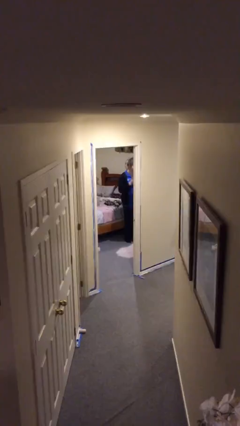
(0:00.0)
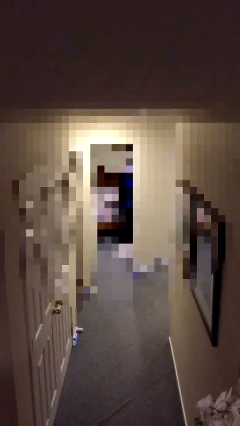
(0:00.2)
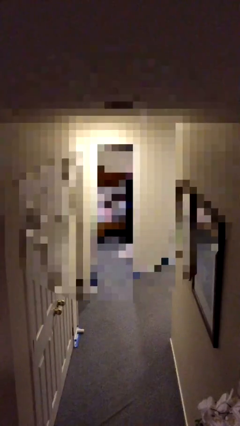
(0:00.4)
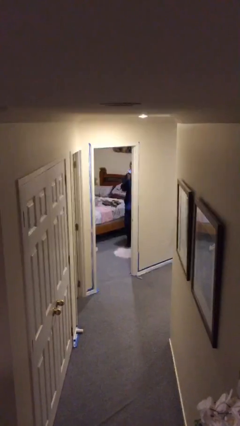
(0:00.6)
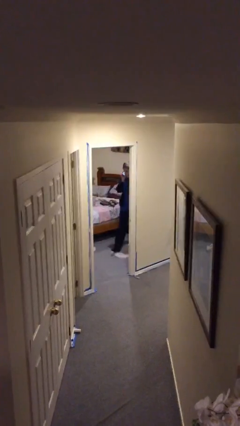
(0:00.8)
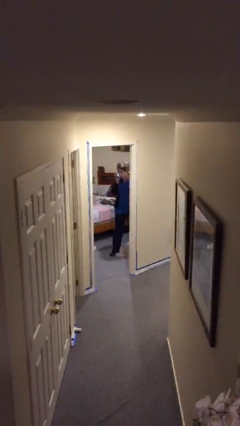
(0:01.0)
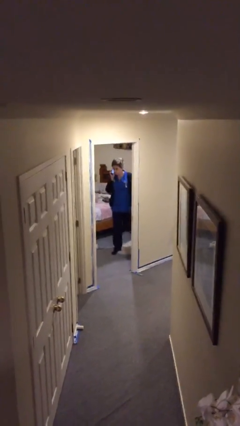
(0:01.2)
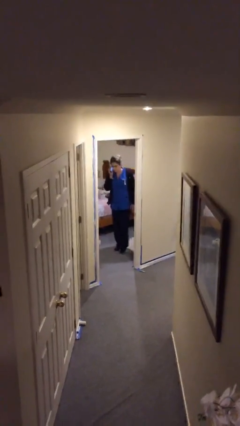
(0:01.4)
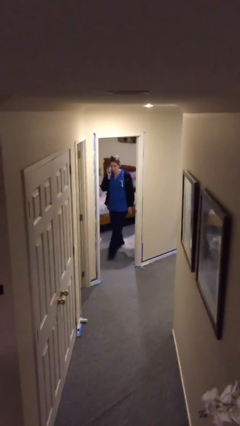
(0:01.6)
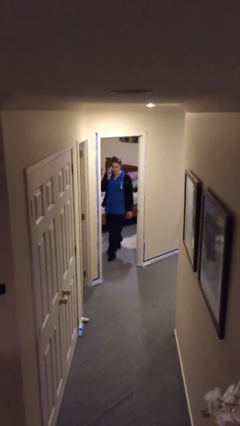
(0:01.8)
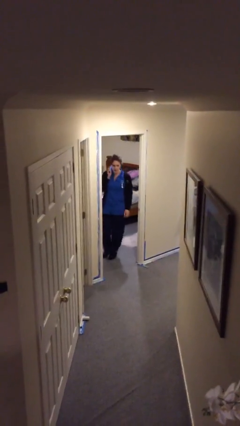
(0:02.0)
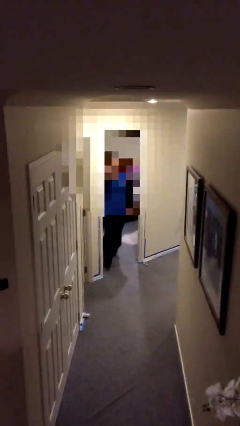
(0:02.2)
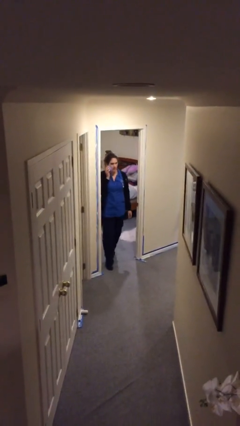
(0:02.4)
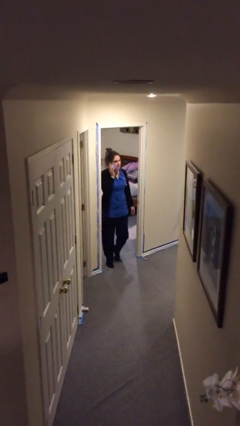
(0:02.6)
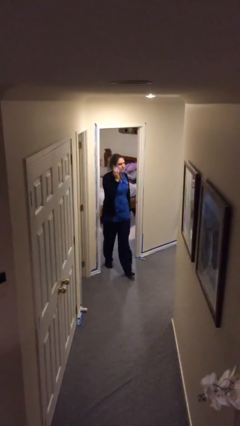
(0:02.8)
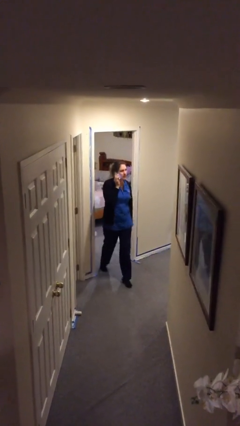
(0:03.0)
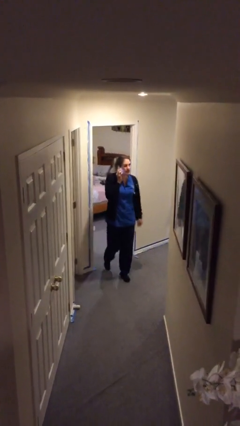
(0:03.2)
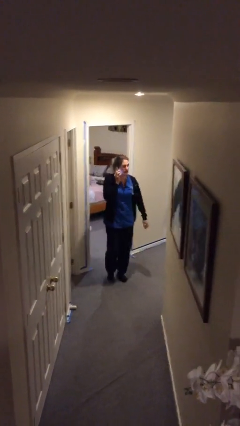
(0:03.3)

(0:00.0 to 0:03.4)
person enters scene through structure

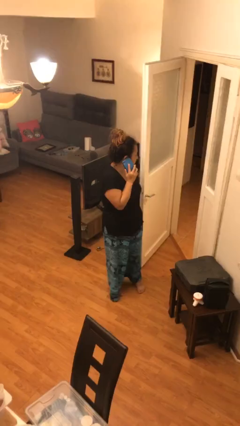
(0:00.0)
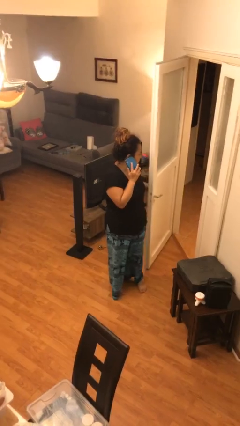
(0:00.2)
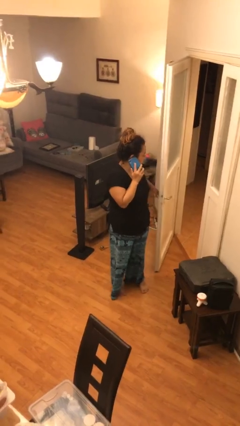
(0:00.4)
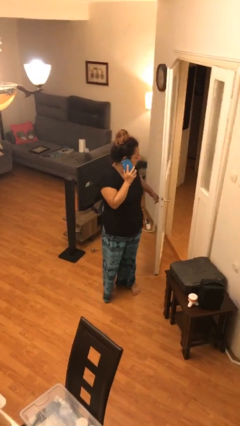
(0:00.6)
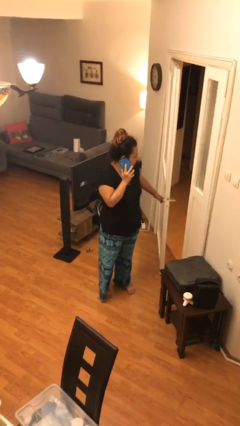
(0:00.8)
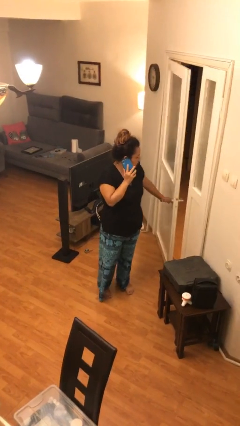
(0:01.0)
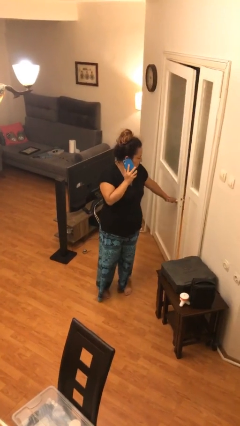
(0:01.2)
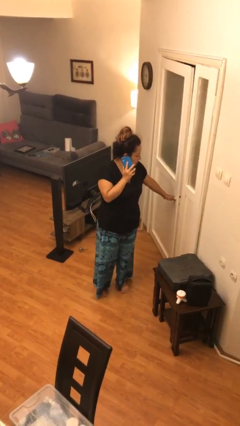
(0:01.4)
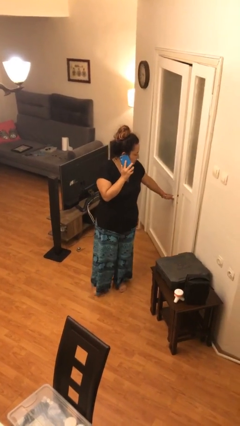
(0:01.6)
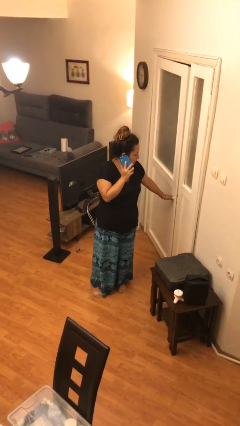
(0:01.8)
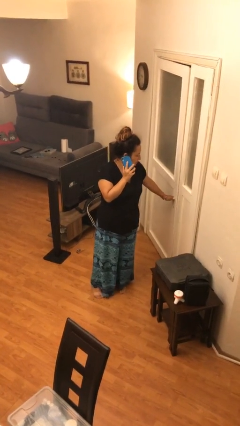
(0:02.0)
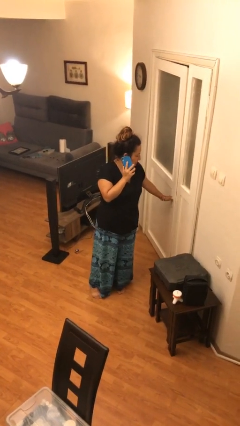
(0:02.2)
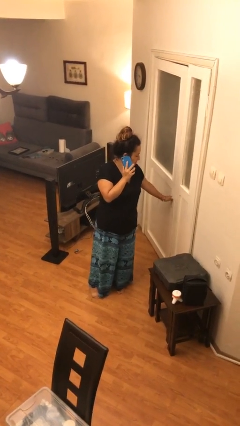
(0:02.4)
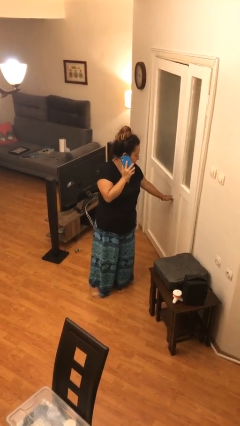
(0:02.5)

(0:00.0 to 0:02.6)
person closes facility door

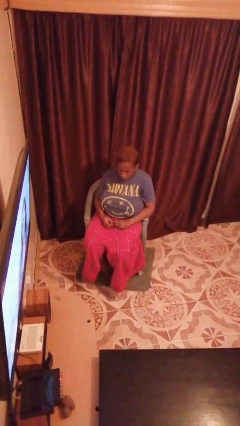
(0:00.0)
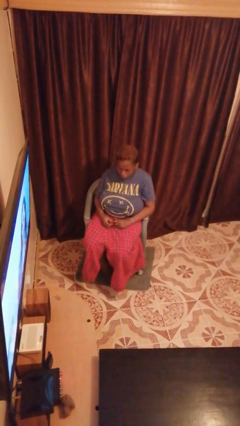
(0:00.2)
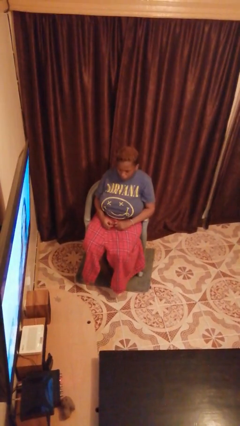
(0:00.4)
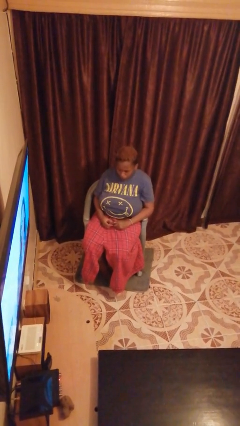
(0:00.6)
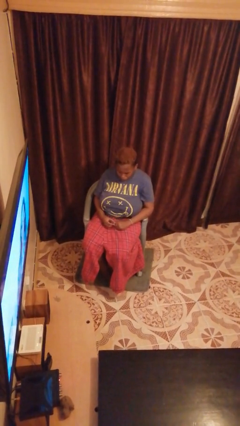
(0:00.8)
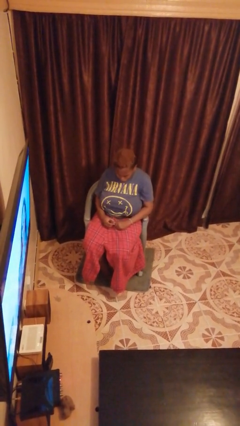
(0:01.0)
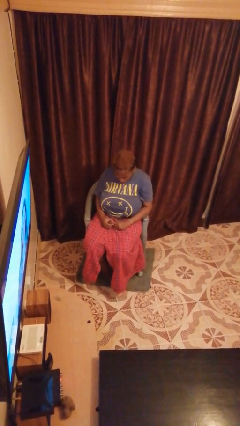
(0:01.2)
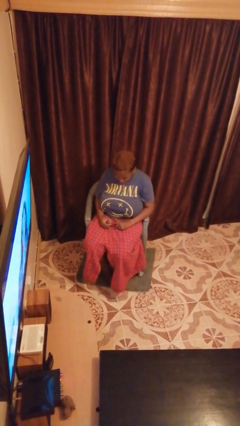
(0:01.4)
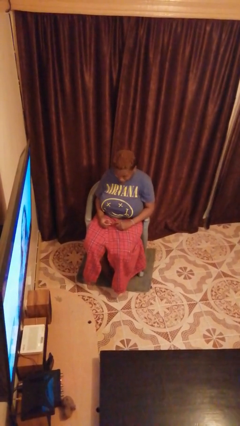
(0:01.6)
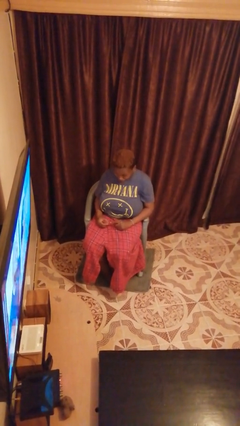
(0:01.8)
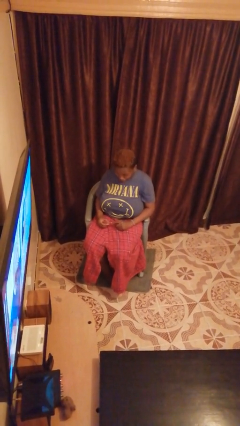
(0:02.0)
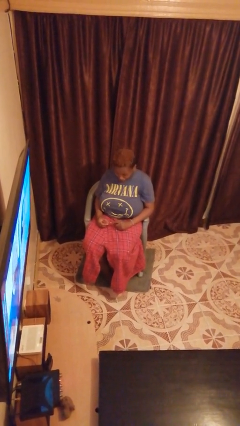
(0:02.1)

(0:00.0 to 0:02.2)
person takes off ring

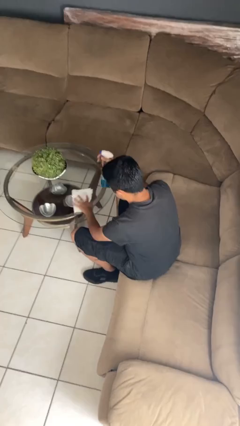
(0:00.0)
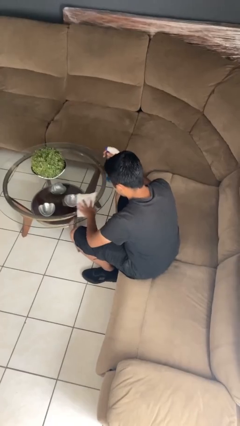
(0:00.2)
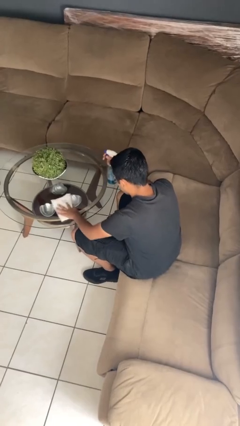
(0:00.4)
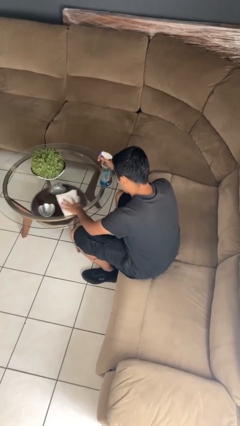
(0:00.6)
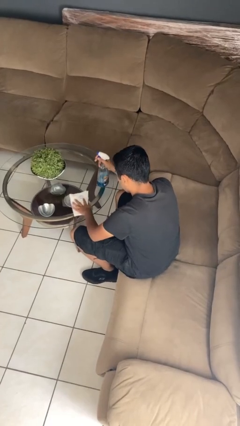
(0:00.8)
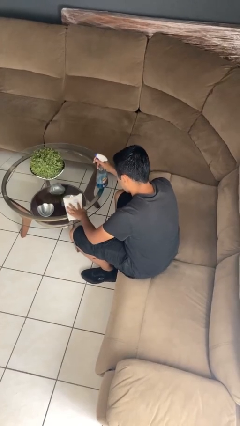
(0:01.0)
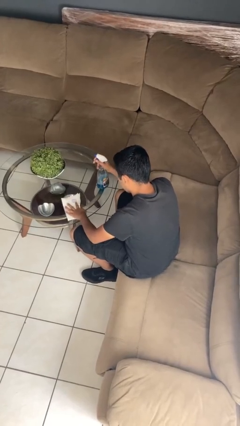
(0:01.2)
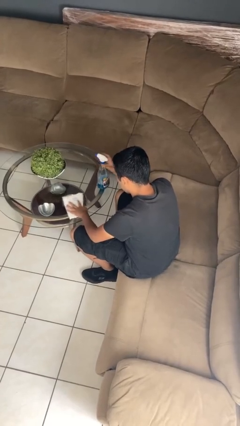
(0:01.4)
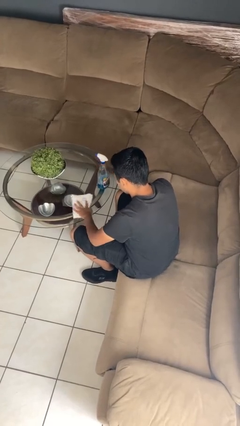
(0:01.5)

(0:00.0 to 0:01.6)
person cleans table with rag

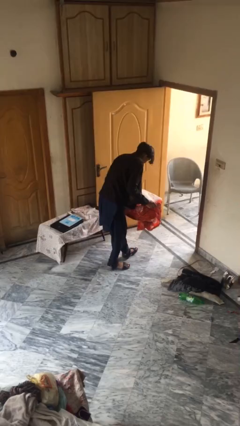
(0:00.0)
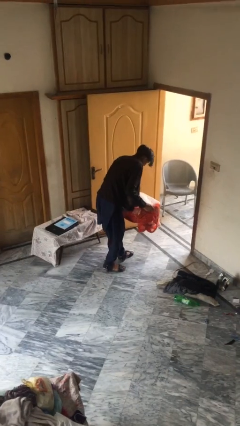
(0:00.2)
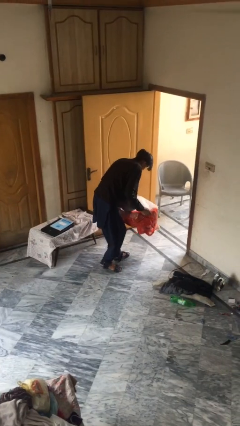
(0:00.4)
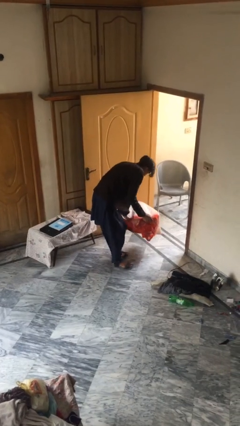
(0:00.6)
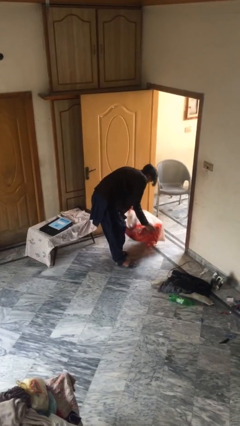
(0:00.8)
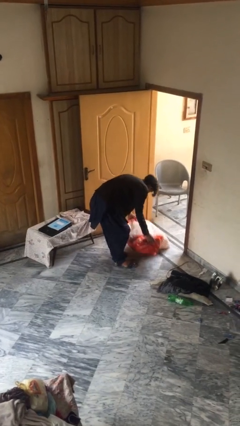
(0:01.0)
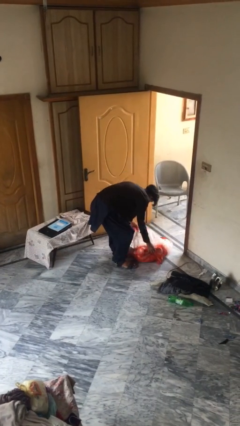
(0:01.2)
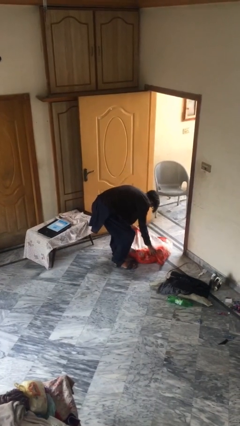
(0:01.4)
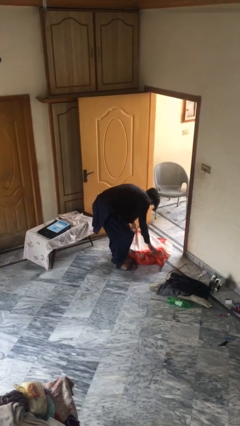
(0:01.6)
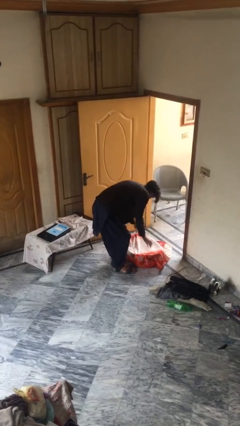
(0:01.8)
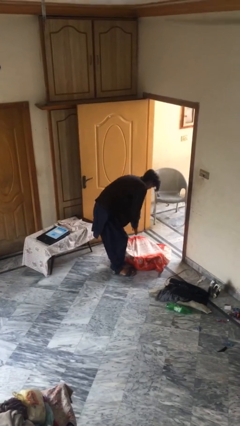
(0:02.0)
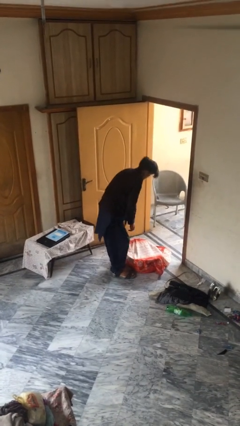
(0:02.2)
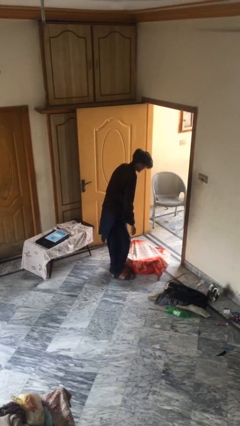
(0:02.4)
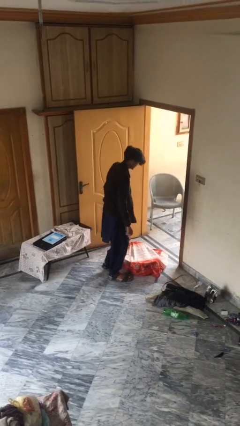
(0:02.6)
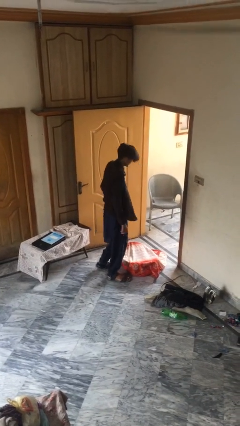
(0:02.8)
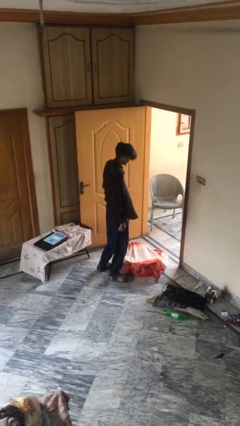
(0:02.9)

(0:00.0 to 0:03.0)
person puts down object on floor

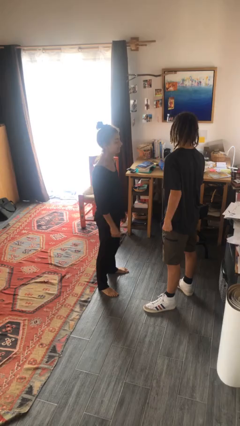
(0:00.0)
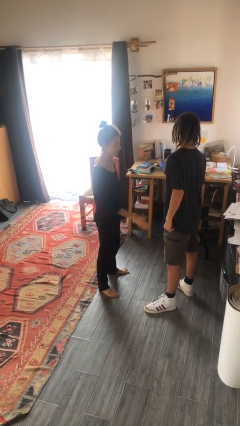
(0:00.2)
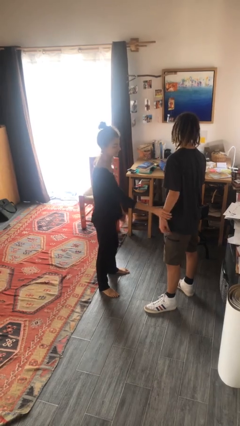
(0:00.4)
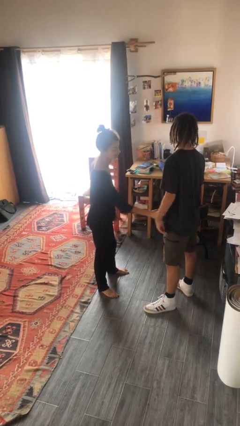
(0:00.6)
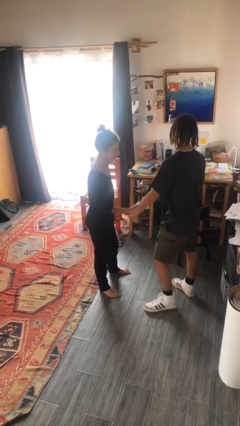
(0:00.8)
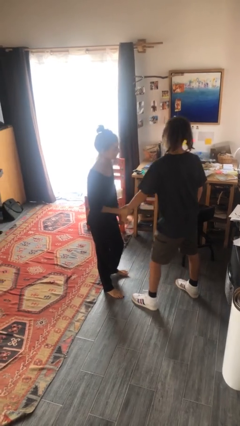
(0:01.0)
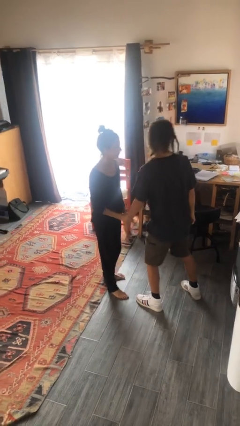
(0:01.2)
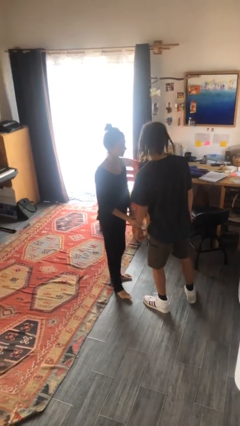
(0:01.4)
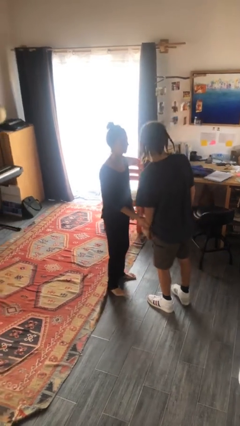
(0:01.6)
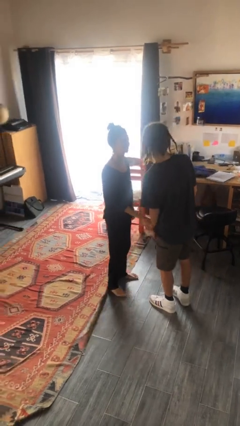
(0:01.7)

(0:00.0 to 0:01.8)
person grabs person by forearm

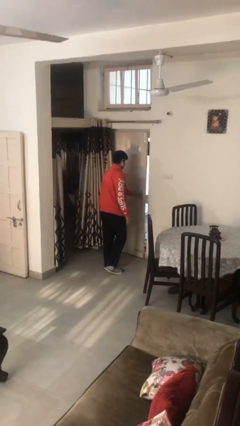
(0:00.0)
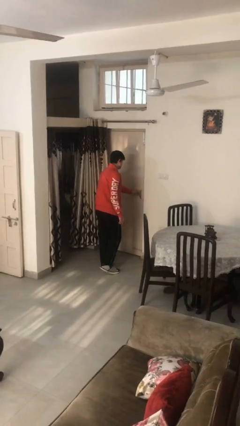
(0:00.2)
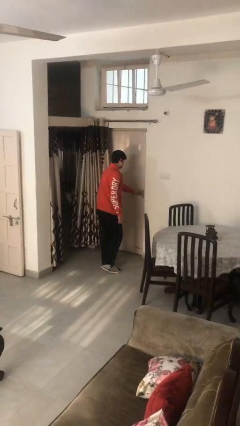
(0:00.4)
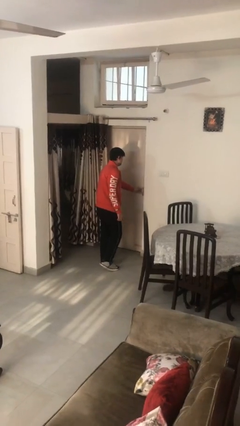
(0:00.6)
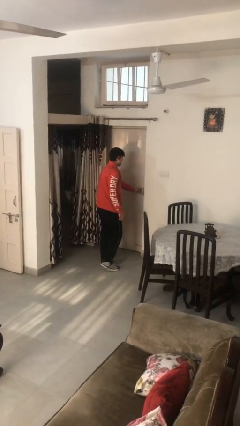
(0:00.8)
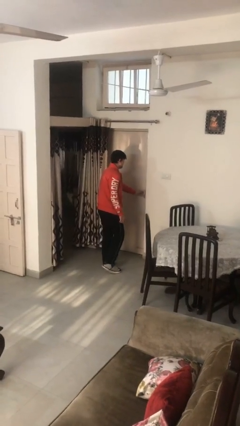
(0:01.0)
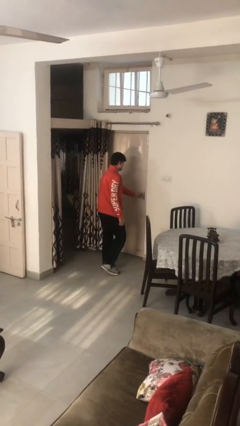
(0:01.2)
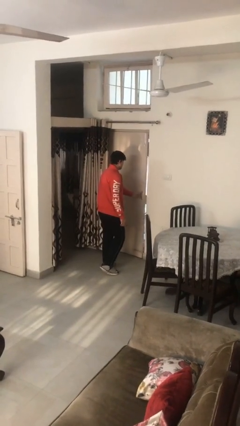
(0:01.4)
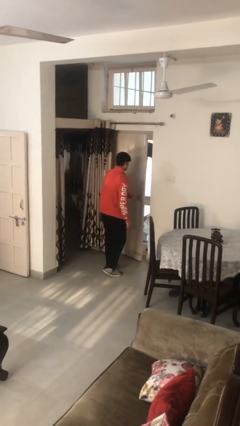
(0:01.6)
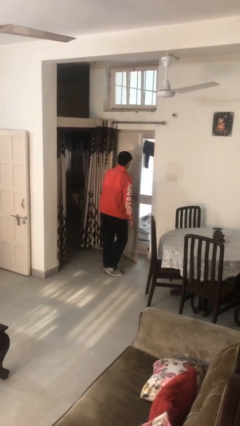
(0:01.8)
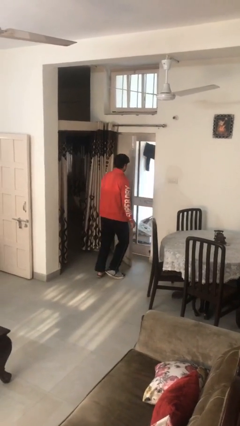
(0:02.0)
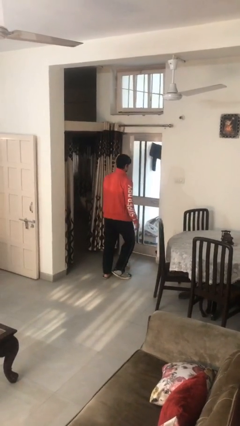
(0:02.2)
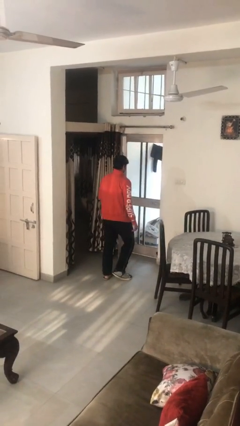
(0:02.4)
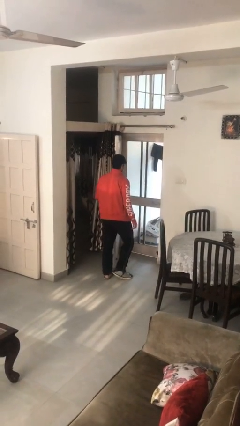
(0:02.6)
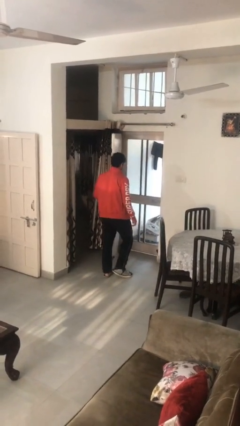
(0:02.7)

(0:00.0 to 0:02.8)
person opens facility door
